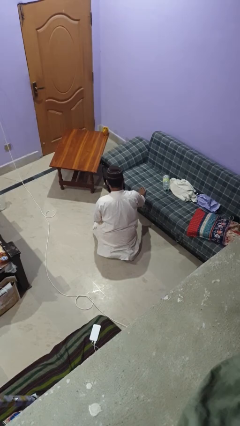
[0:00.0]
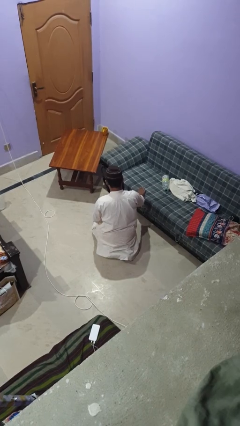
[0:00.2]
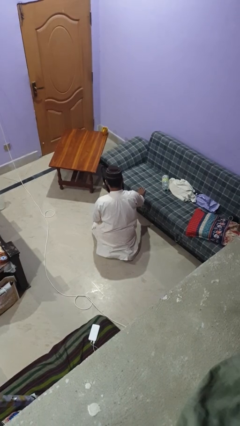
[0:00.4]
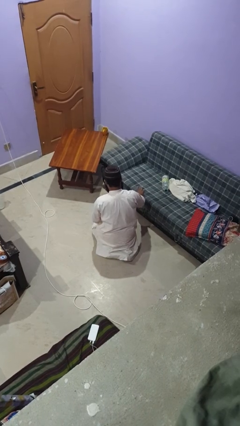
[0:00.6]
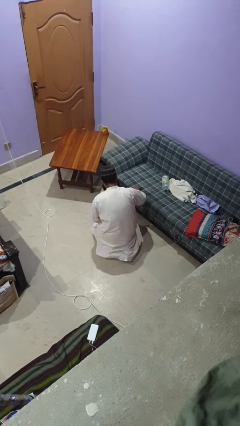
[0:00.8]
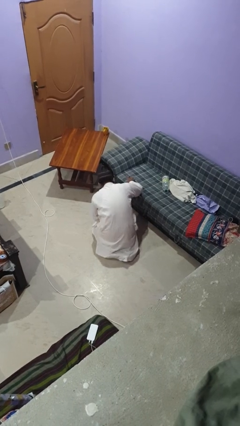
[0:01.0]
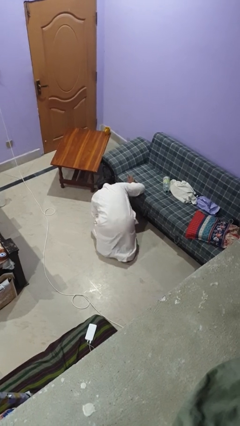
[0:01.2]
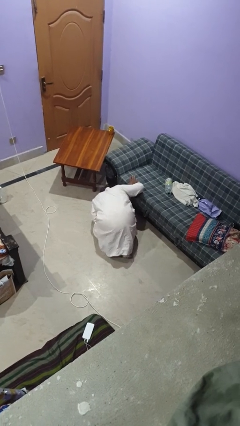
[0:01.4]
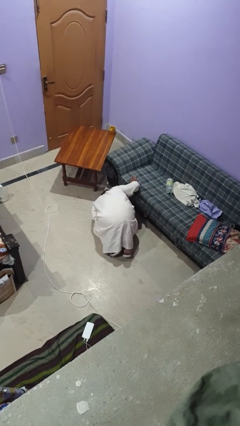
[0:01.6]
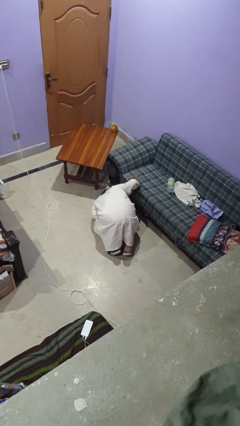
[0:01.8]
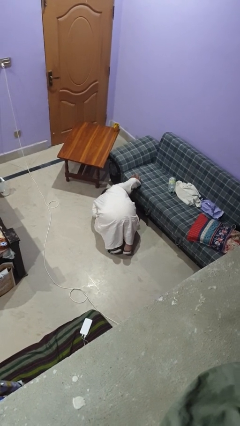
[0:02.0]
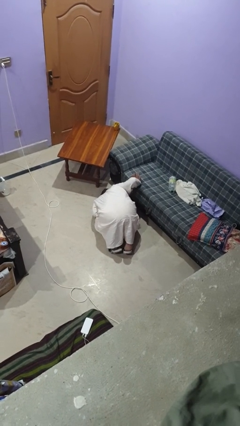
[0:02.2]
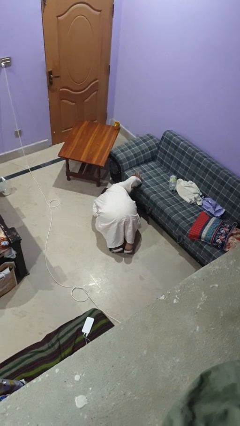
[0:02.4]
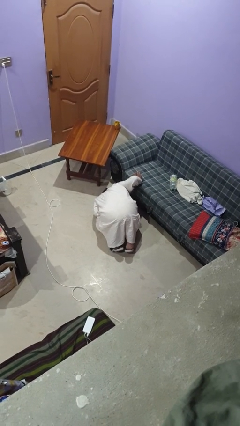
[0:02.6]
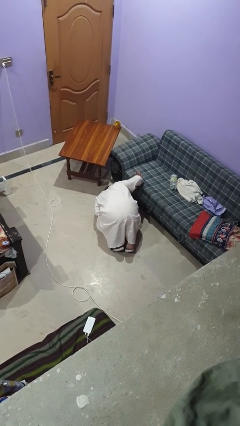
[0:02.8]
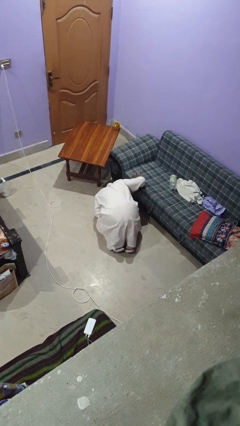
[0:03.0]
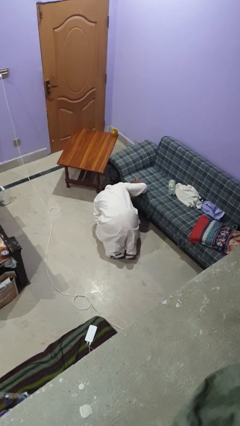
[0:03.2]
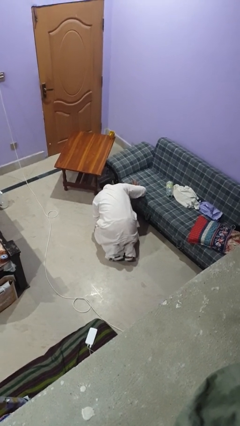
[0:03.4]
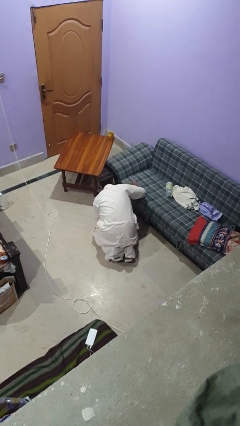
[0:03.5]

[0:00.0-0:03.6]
person searches under couch

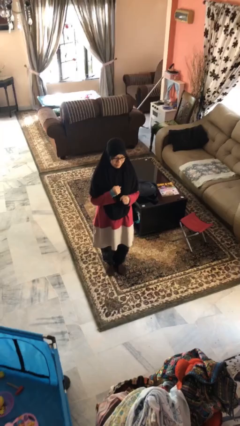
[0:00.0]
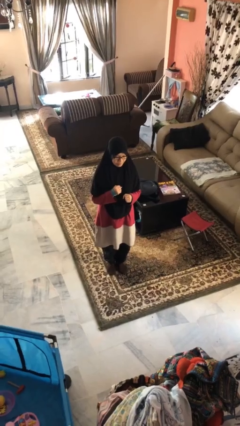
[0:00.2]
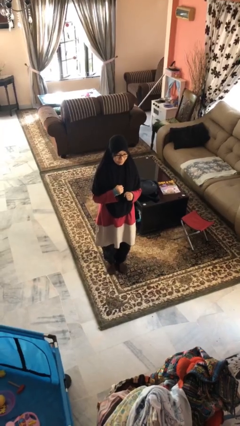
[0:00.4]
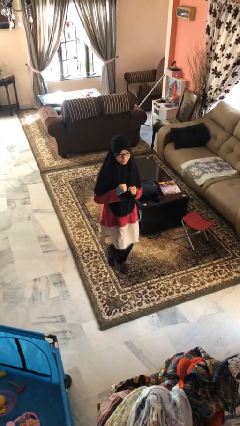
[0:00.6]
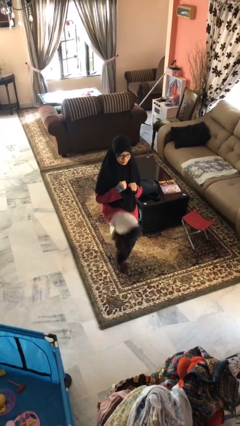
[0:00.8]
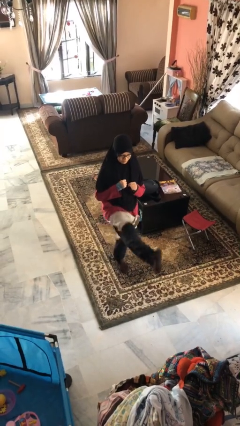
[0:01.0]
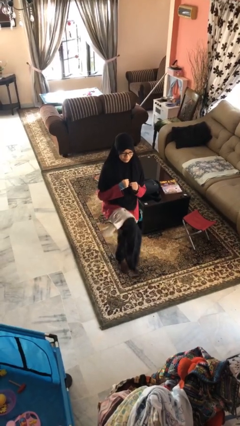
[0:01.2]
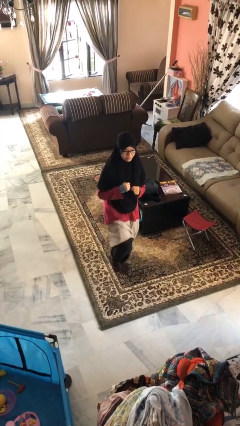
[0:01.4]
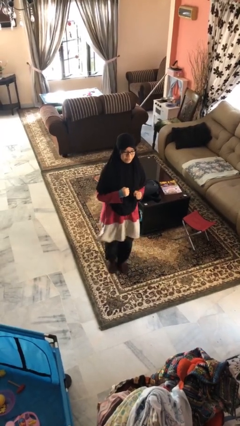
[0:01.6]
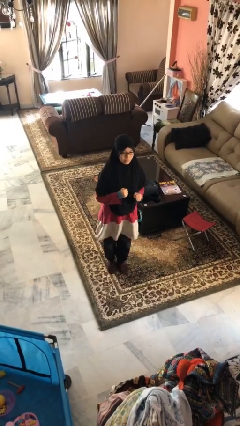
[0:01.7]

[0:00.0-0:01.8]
person karate kicks

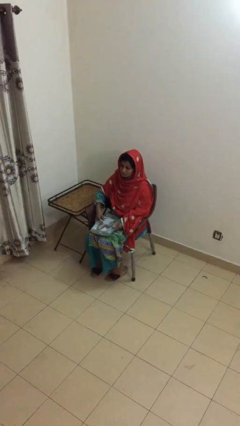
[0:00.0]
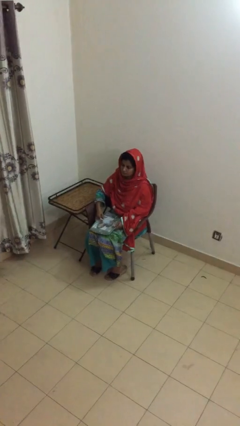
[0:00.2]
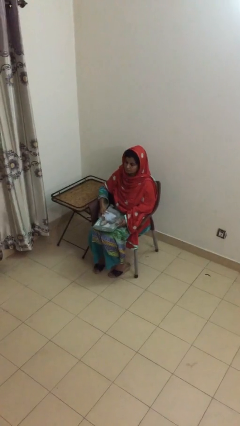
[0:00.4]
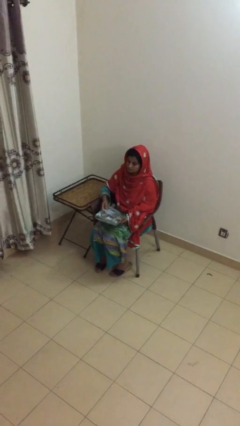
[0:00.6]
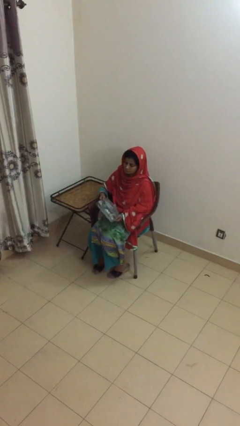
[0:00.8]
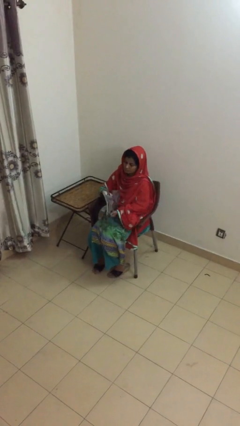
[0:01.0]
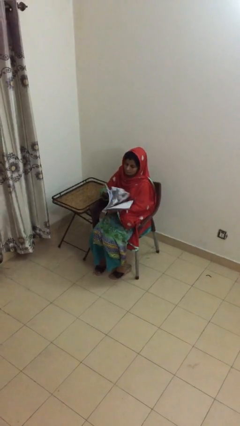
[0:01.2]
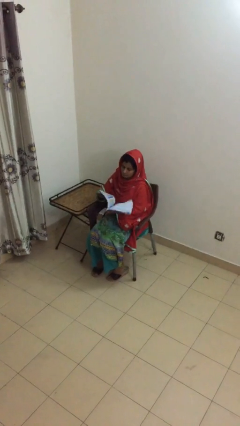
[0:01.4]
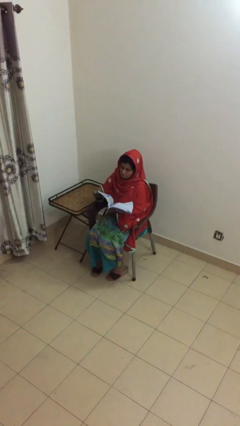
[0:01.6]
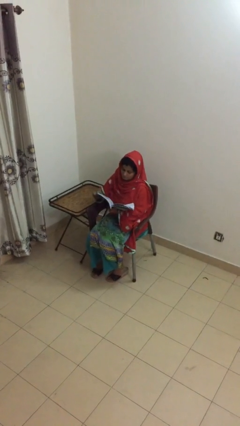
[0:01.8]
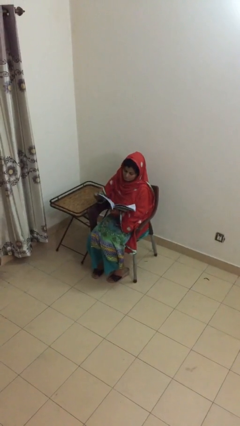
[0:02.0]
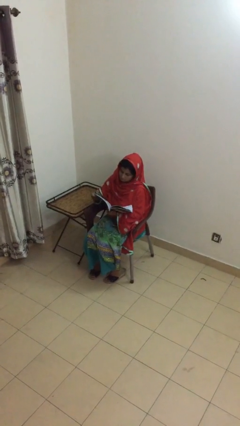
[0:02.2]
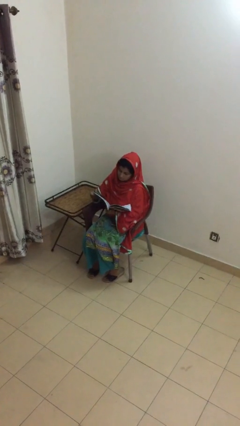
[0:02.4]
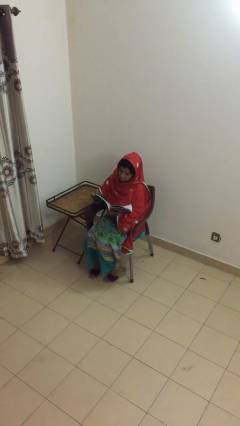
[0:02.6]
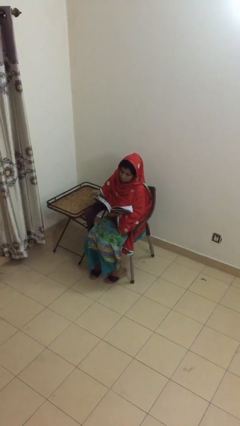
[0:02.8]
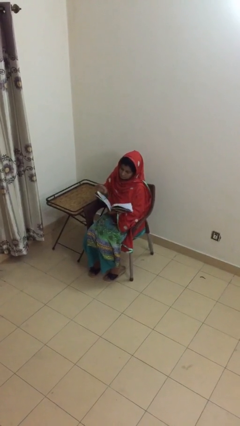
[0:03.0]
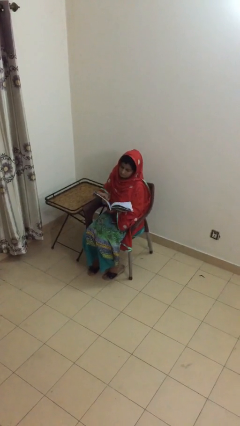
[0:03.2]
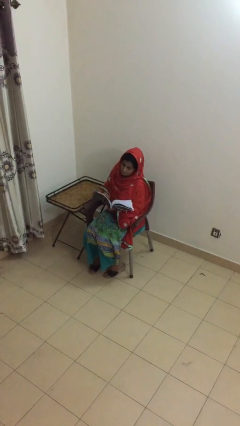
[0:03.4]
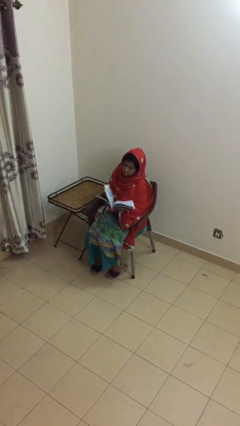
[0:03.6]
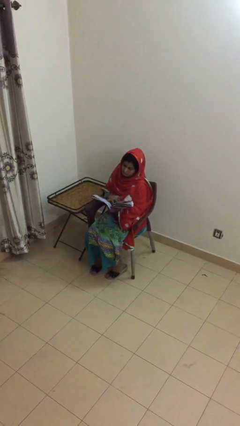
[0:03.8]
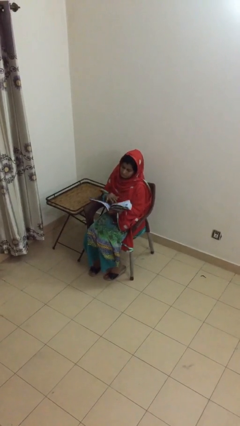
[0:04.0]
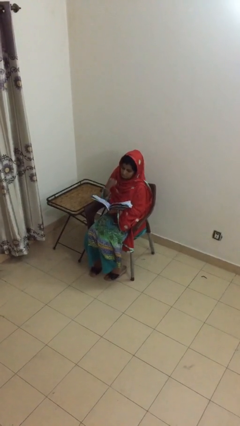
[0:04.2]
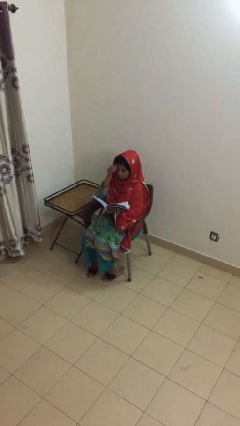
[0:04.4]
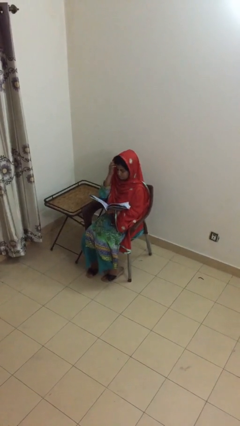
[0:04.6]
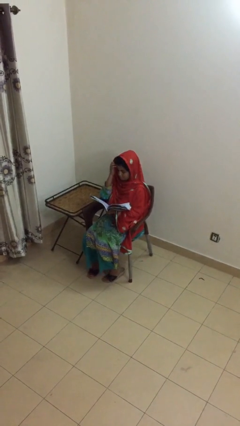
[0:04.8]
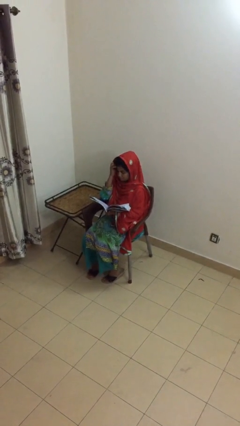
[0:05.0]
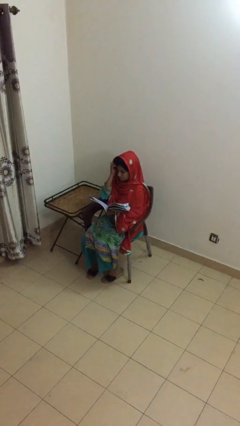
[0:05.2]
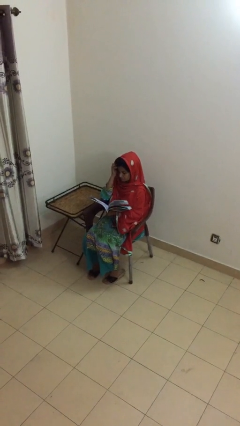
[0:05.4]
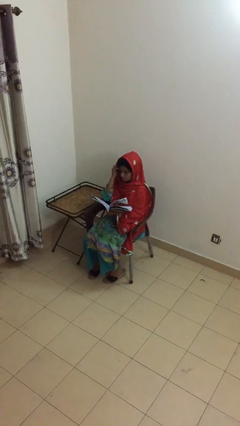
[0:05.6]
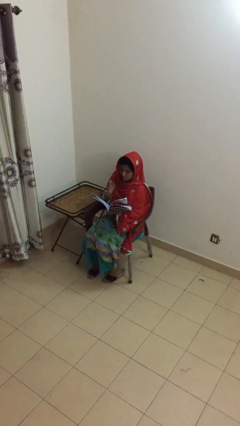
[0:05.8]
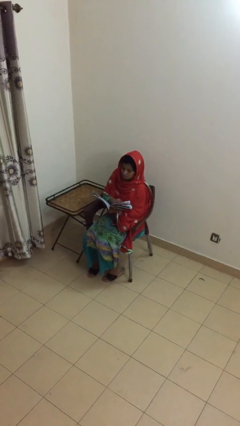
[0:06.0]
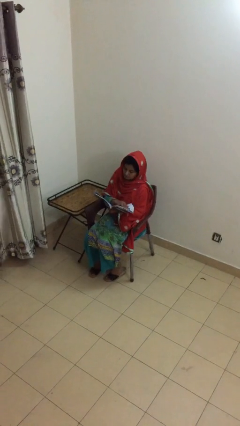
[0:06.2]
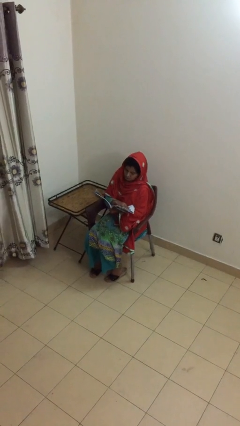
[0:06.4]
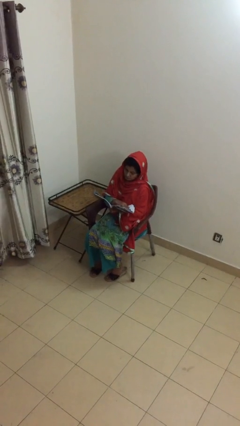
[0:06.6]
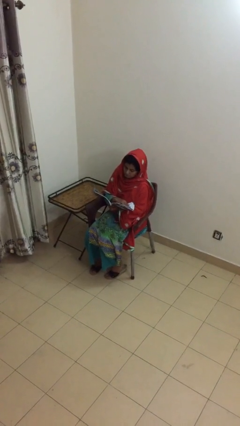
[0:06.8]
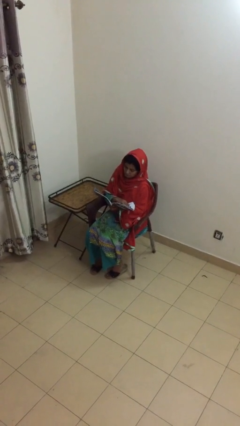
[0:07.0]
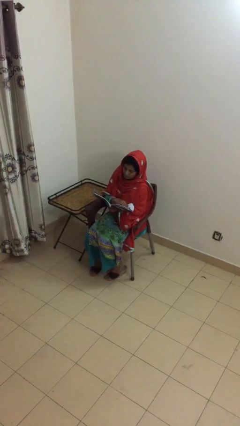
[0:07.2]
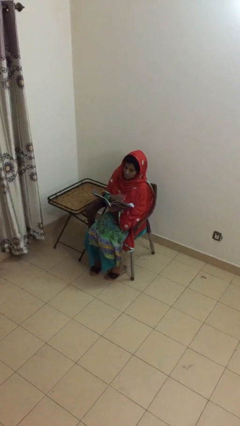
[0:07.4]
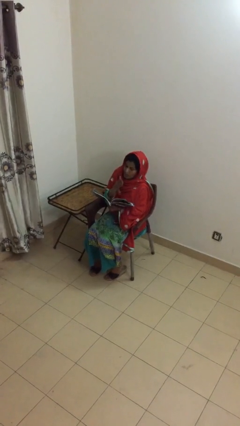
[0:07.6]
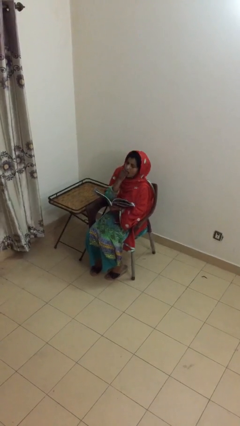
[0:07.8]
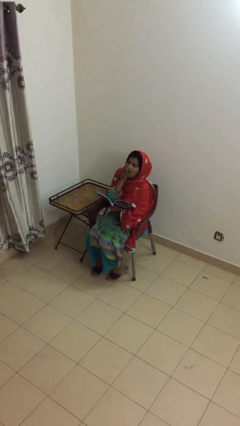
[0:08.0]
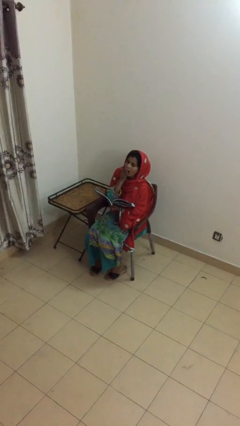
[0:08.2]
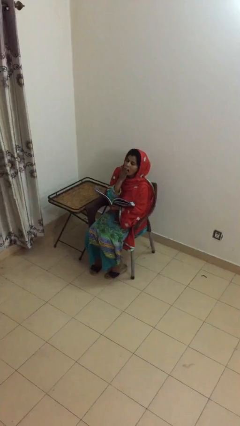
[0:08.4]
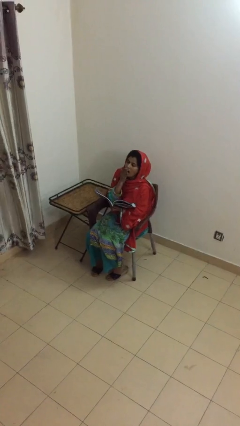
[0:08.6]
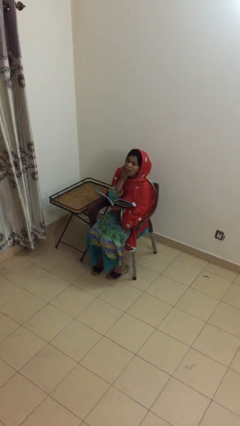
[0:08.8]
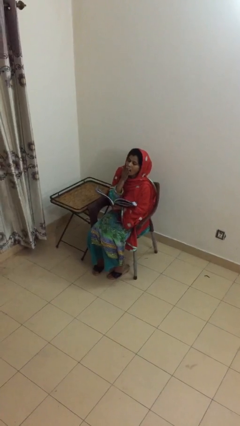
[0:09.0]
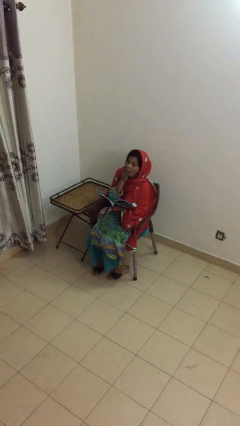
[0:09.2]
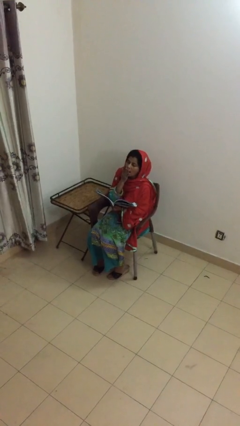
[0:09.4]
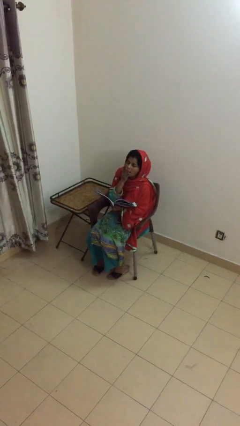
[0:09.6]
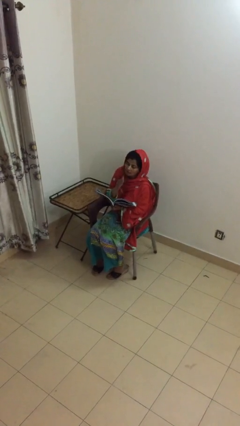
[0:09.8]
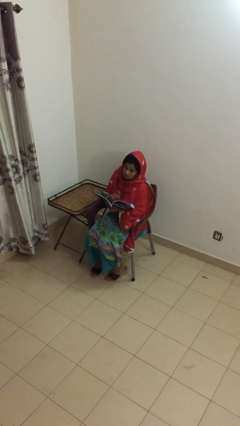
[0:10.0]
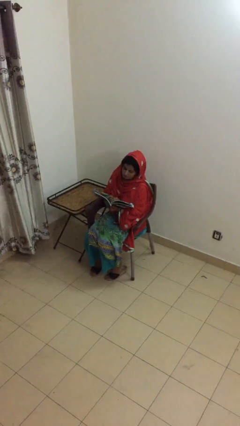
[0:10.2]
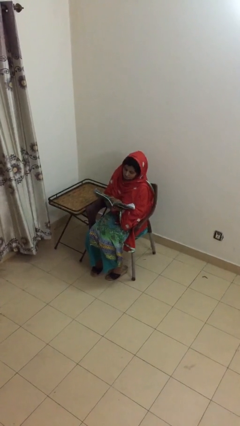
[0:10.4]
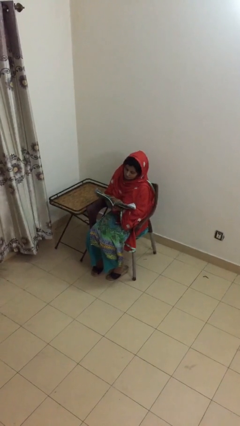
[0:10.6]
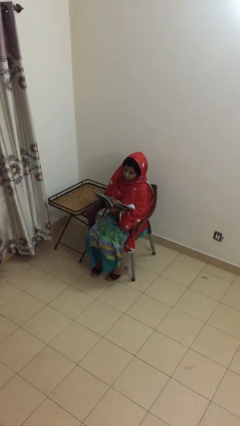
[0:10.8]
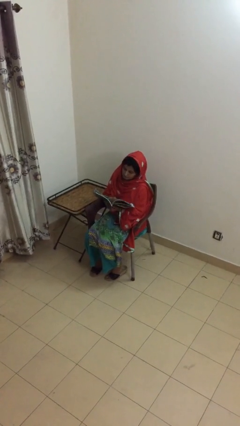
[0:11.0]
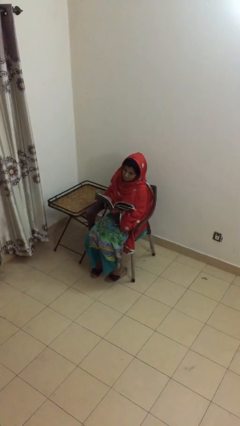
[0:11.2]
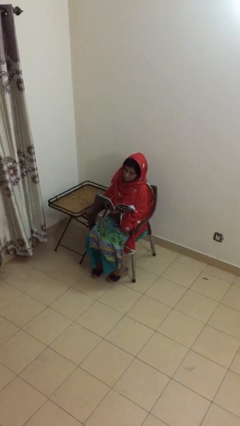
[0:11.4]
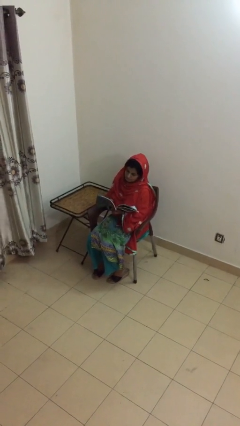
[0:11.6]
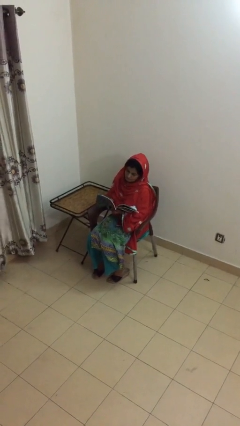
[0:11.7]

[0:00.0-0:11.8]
person reads document

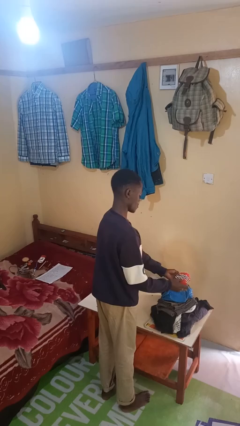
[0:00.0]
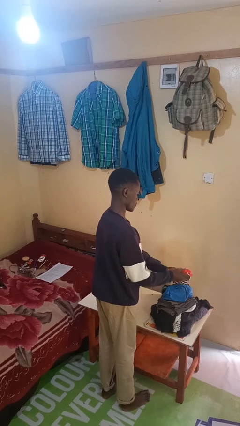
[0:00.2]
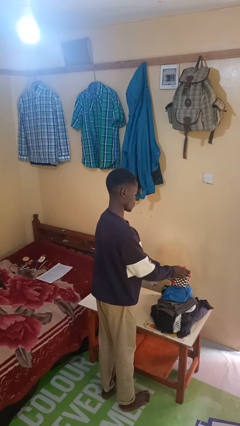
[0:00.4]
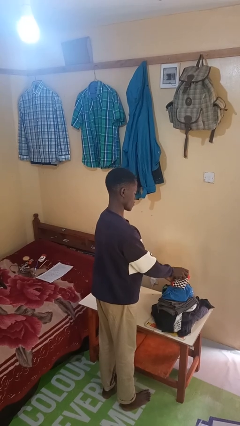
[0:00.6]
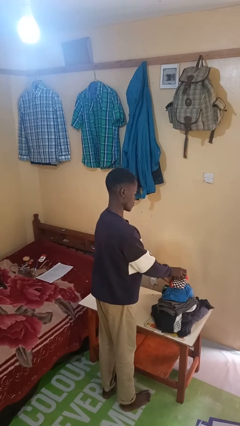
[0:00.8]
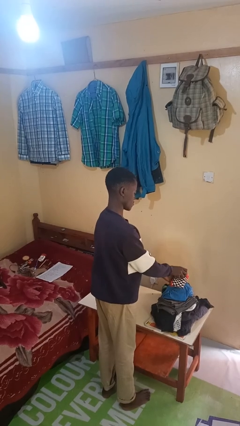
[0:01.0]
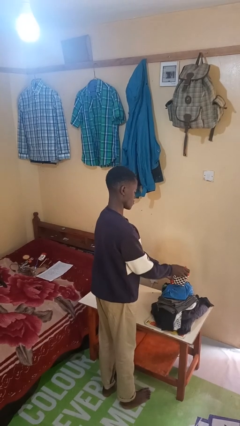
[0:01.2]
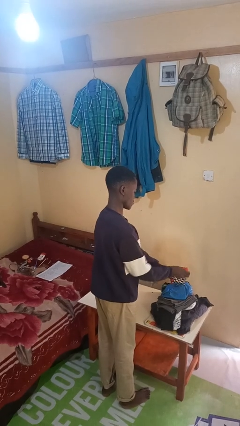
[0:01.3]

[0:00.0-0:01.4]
person folds socks
